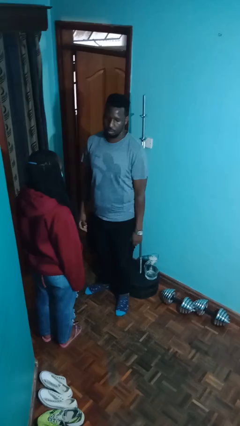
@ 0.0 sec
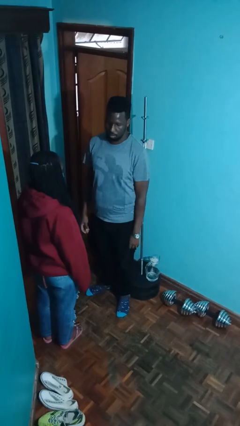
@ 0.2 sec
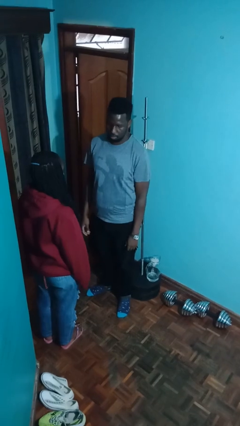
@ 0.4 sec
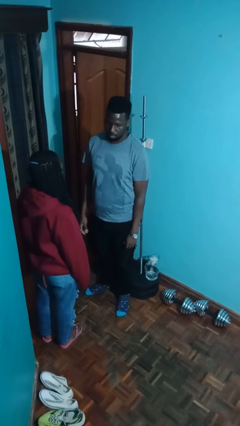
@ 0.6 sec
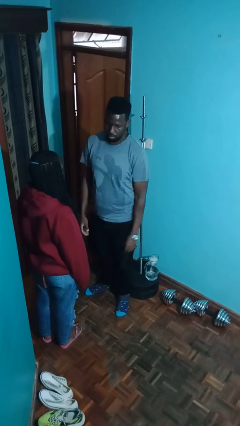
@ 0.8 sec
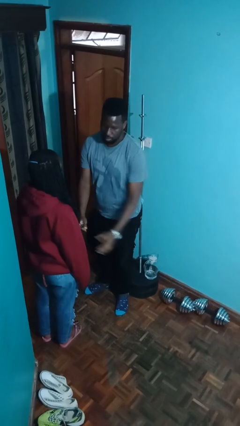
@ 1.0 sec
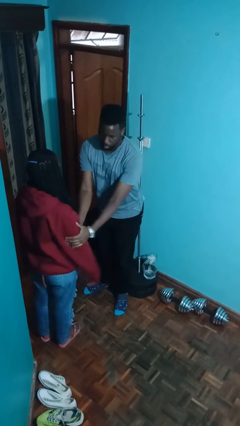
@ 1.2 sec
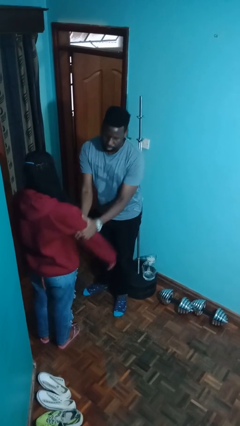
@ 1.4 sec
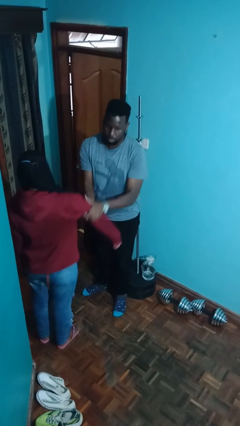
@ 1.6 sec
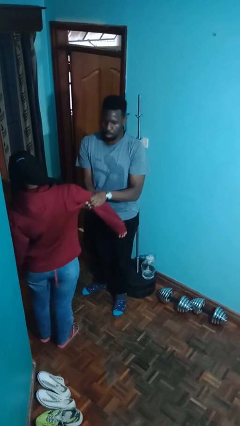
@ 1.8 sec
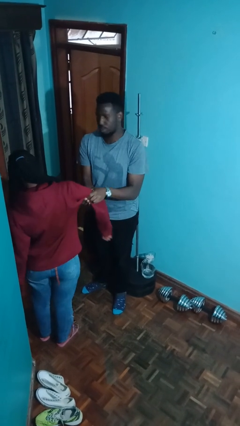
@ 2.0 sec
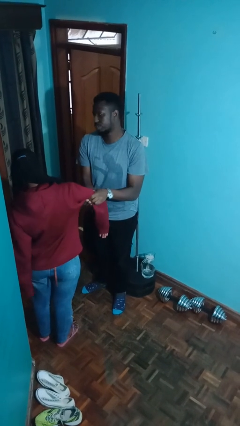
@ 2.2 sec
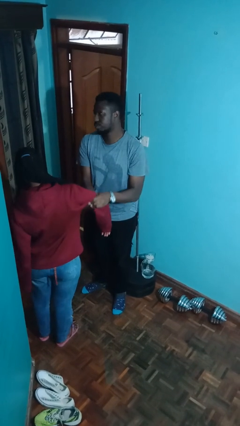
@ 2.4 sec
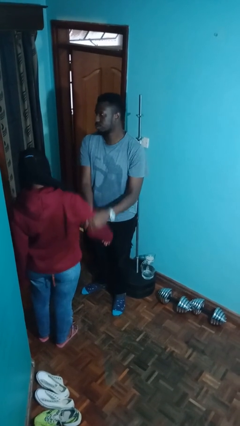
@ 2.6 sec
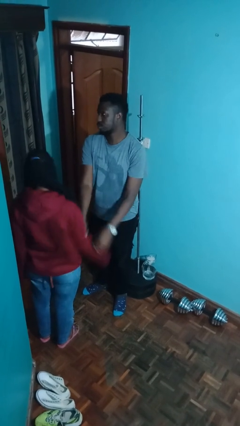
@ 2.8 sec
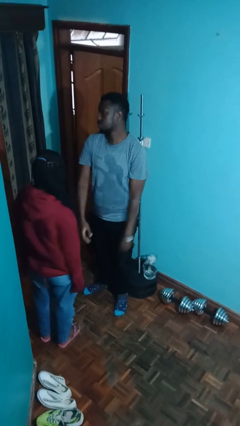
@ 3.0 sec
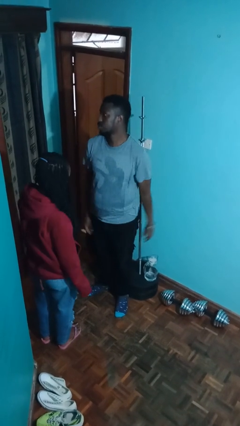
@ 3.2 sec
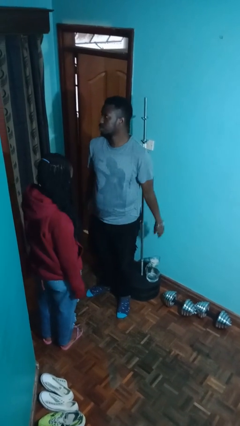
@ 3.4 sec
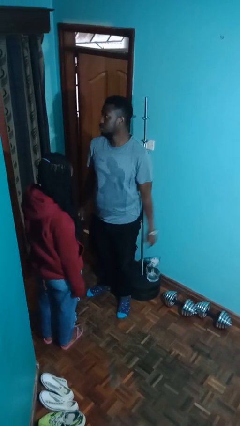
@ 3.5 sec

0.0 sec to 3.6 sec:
person grabs person by bicep

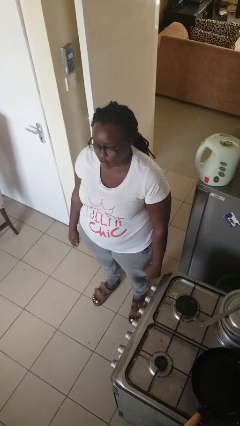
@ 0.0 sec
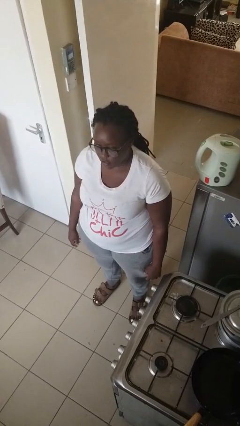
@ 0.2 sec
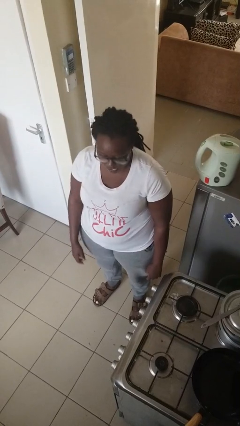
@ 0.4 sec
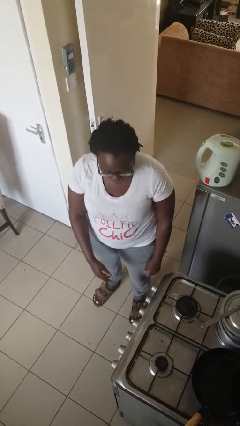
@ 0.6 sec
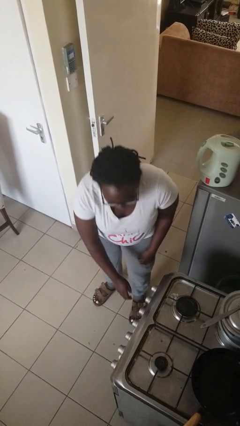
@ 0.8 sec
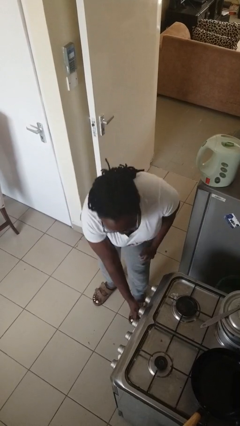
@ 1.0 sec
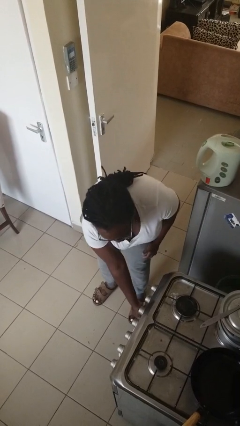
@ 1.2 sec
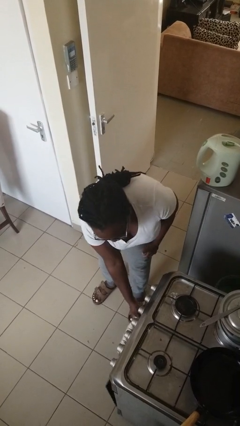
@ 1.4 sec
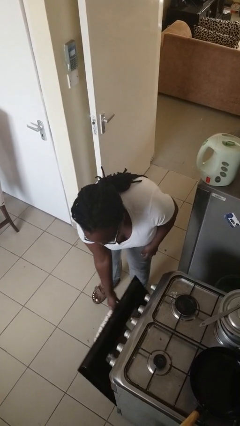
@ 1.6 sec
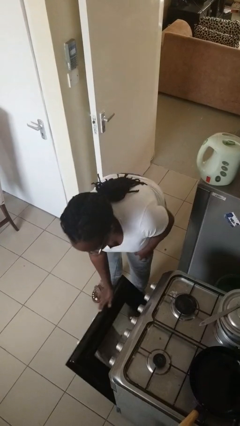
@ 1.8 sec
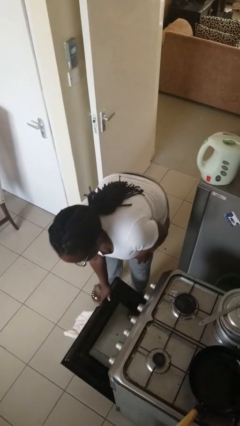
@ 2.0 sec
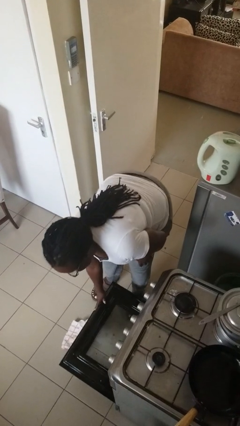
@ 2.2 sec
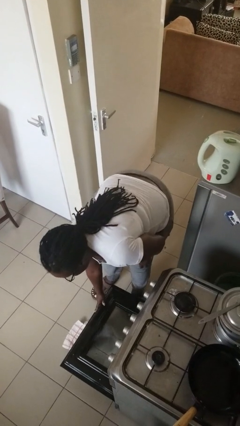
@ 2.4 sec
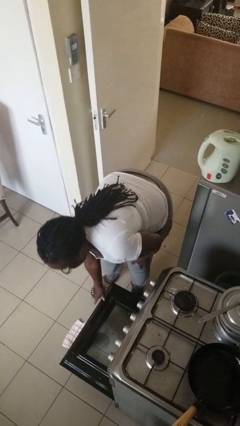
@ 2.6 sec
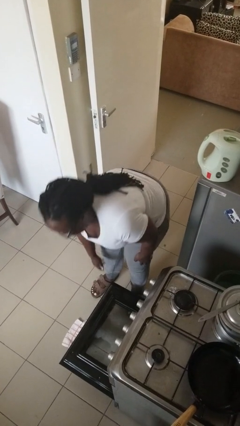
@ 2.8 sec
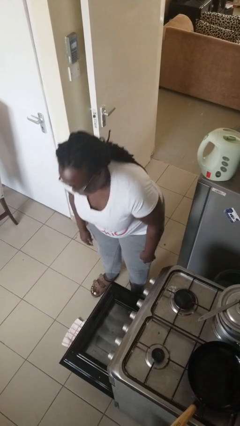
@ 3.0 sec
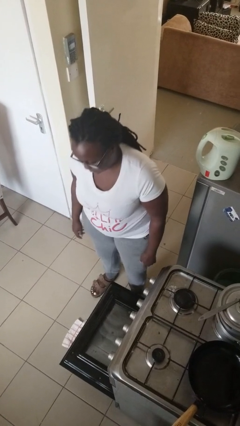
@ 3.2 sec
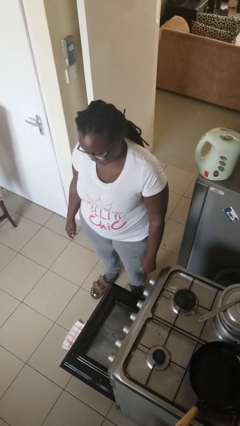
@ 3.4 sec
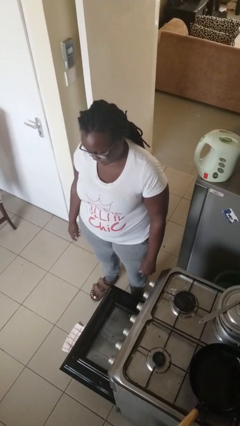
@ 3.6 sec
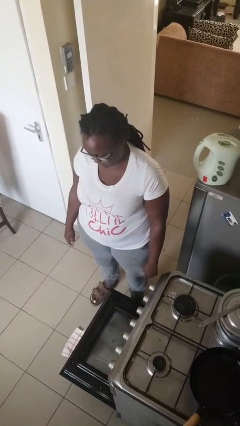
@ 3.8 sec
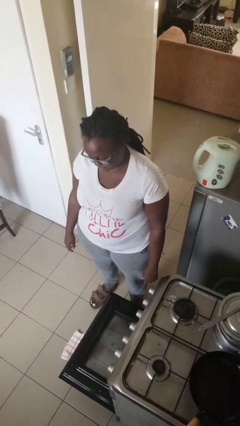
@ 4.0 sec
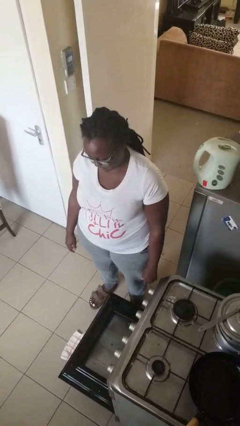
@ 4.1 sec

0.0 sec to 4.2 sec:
person opens oven door

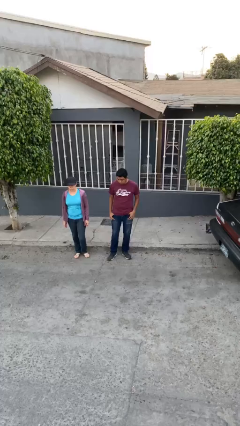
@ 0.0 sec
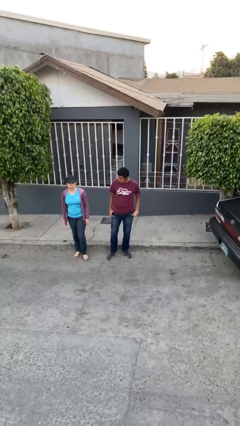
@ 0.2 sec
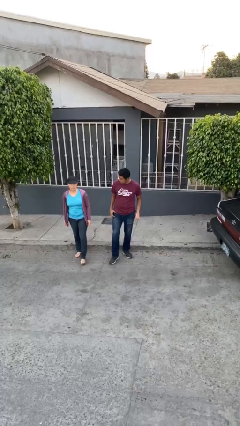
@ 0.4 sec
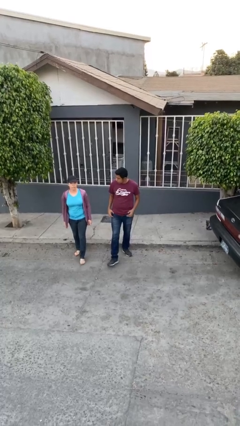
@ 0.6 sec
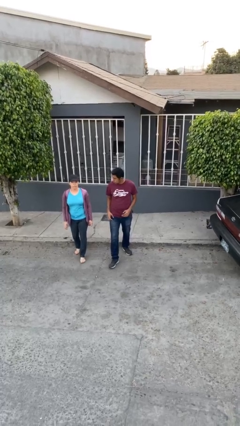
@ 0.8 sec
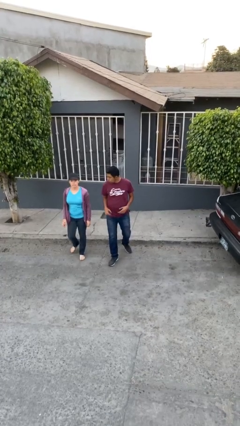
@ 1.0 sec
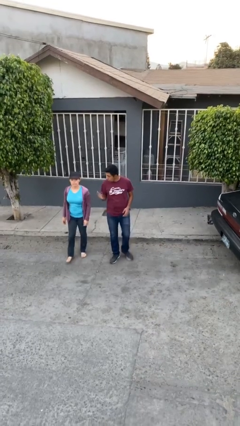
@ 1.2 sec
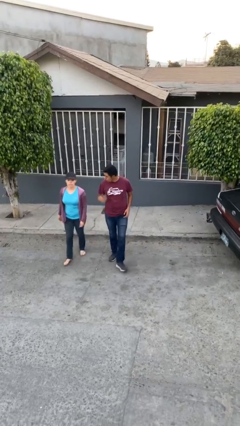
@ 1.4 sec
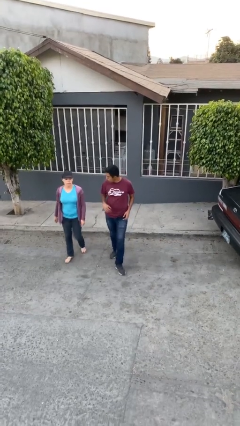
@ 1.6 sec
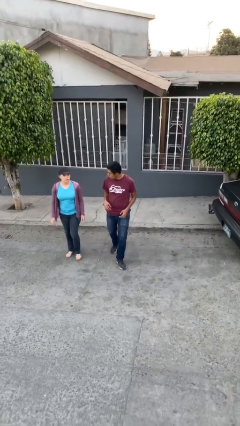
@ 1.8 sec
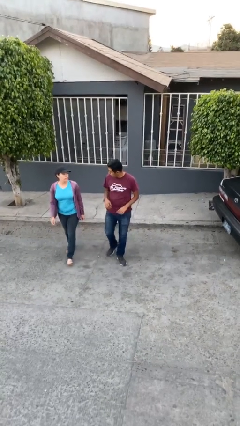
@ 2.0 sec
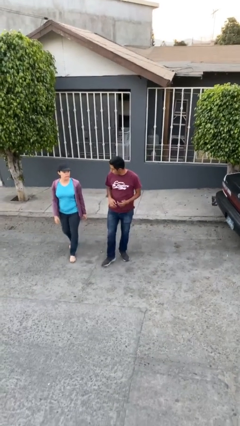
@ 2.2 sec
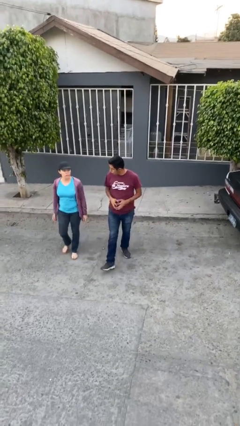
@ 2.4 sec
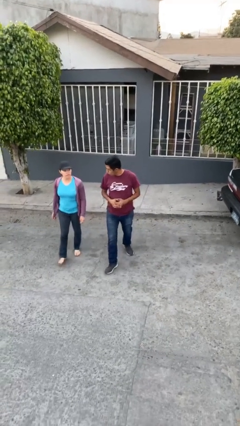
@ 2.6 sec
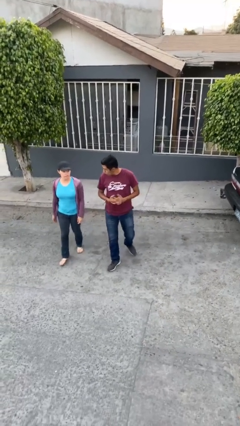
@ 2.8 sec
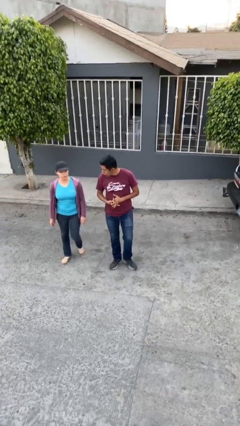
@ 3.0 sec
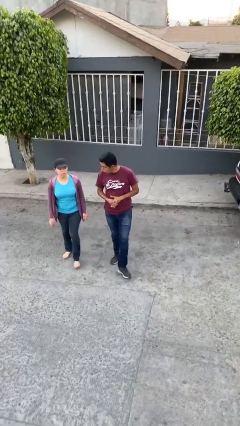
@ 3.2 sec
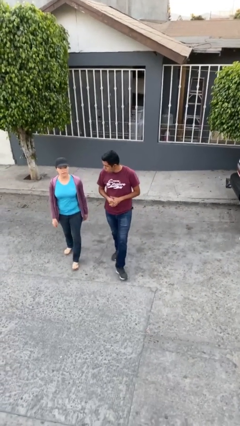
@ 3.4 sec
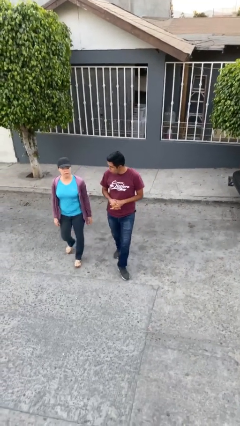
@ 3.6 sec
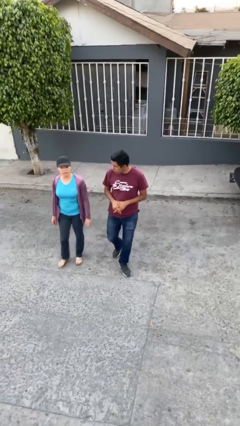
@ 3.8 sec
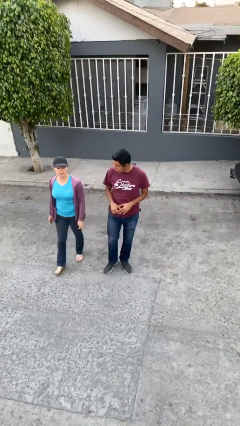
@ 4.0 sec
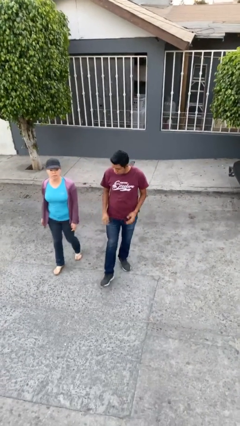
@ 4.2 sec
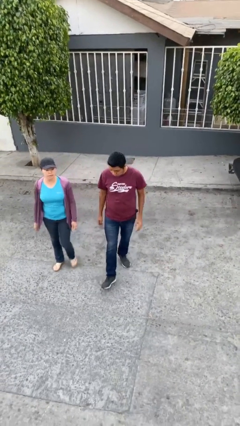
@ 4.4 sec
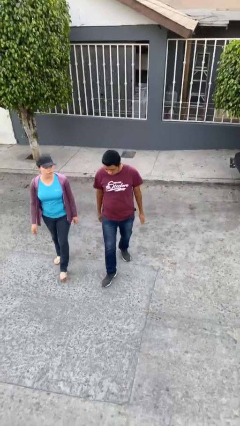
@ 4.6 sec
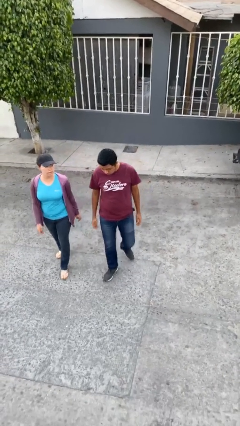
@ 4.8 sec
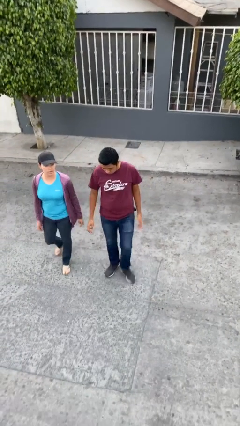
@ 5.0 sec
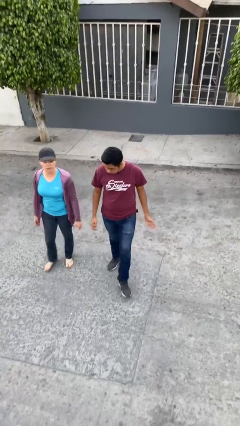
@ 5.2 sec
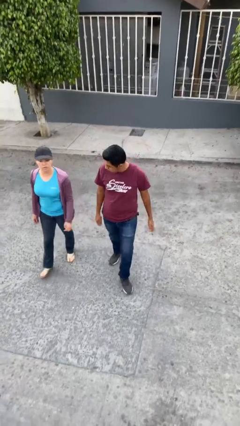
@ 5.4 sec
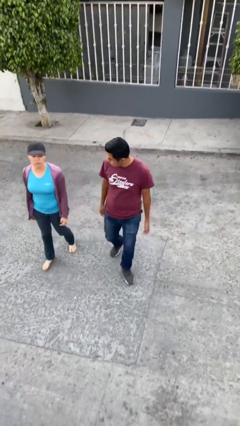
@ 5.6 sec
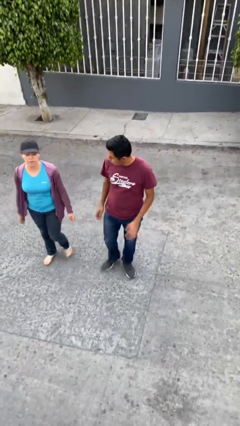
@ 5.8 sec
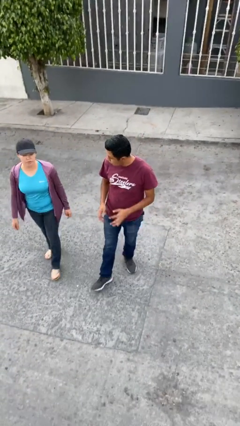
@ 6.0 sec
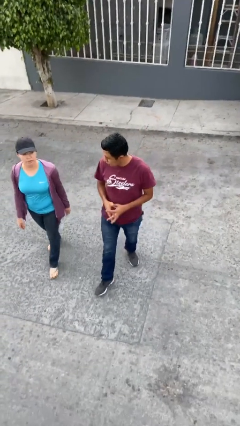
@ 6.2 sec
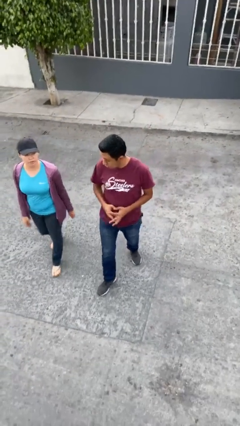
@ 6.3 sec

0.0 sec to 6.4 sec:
person talks to person

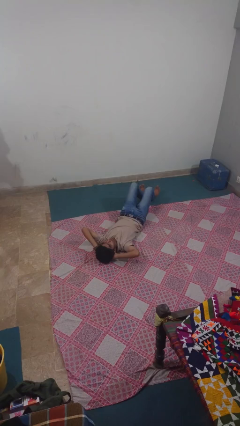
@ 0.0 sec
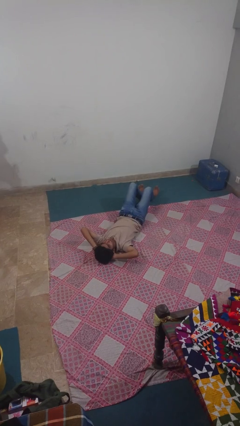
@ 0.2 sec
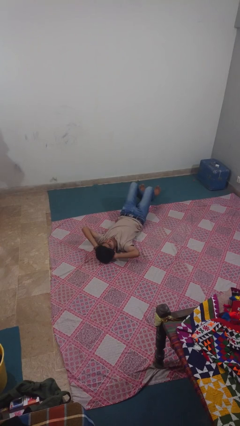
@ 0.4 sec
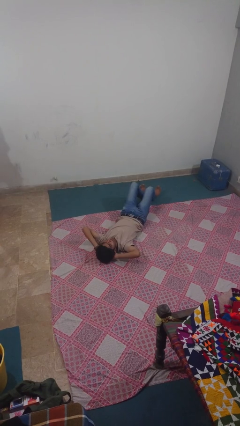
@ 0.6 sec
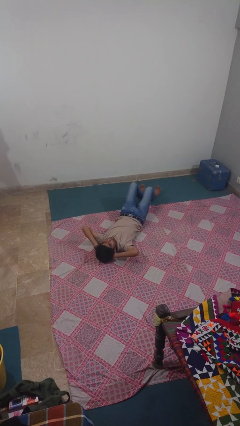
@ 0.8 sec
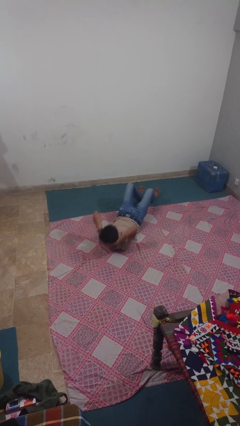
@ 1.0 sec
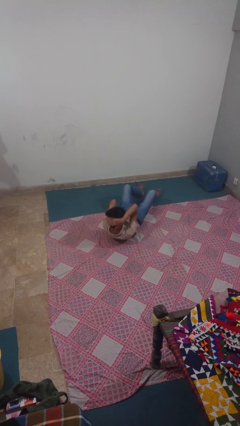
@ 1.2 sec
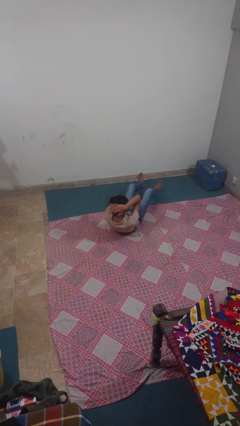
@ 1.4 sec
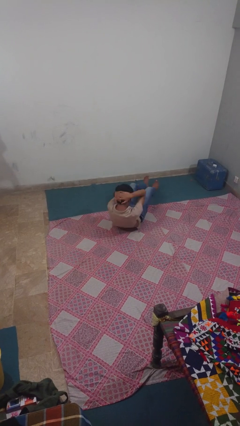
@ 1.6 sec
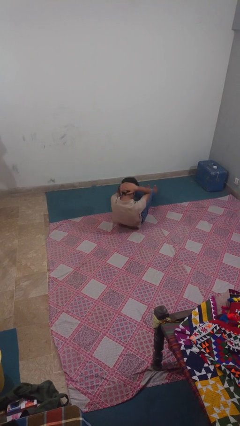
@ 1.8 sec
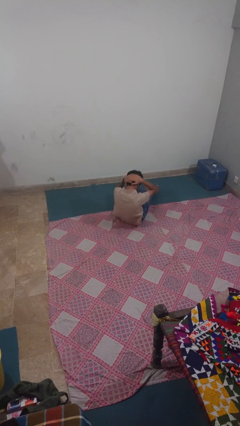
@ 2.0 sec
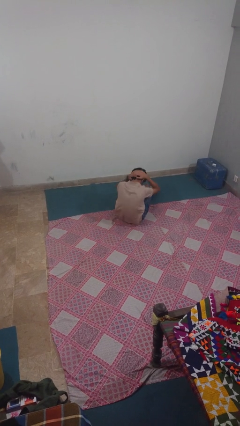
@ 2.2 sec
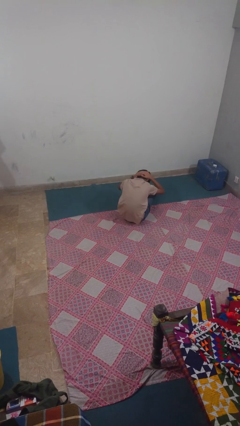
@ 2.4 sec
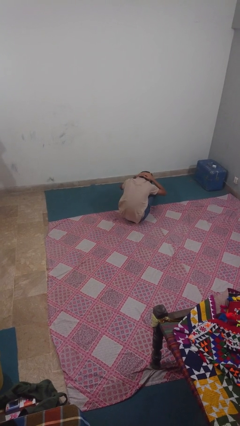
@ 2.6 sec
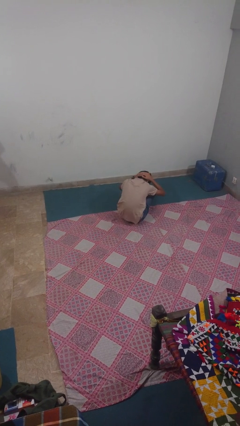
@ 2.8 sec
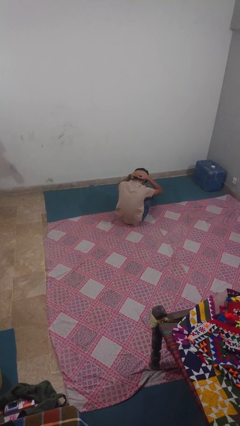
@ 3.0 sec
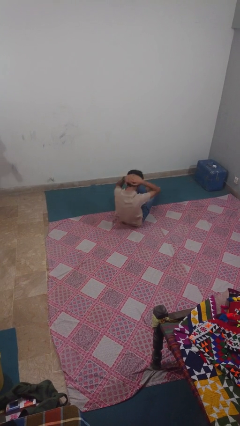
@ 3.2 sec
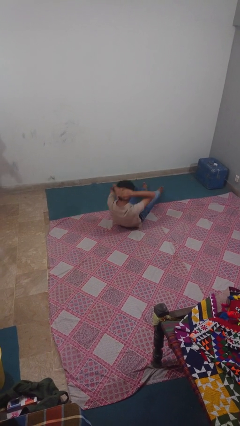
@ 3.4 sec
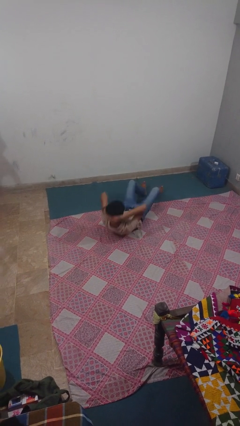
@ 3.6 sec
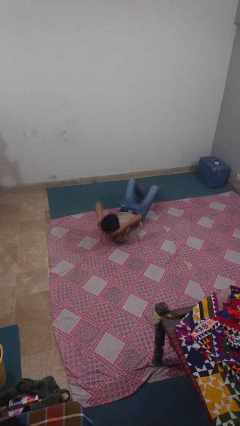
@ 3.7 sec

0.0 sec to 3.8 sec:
person exercises with situp
